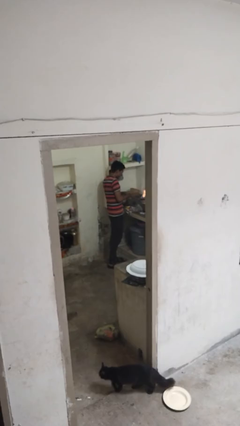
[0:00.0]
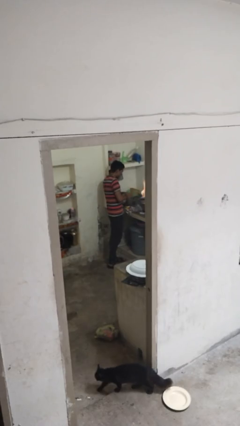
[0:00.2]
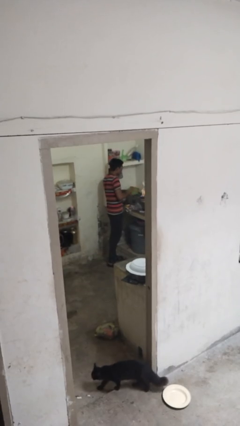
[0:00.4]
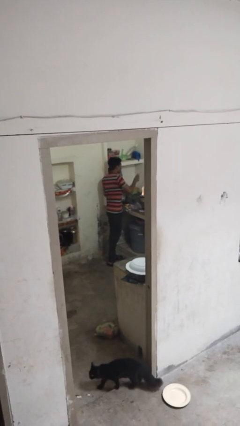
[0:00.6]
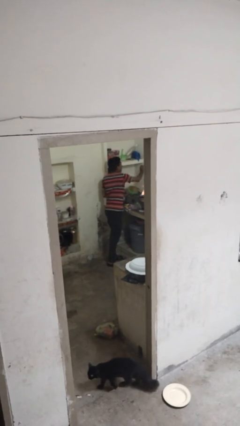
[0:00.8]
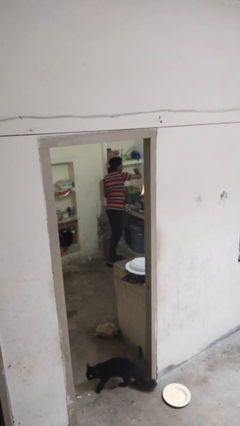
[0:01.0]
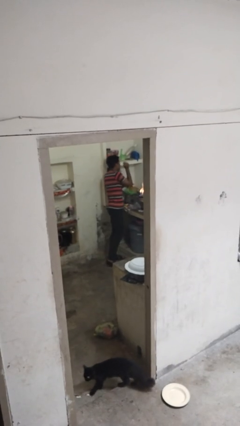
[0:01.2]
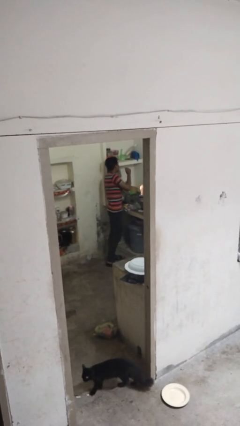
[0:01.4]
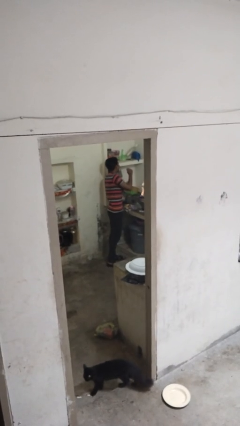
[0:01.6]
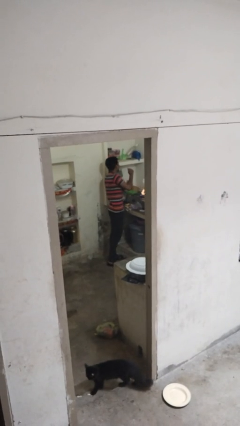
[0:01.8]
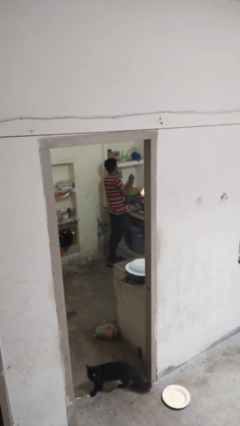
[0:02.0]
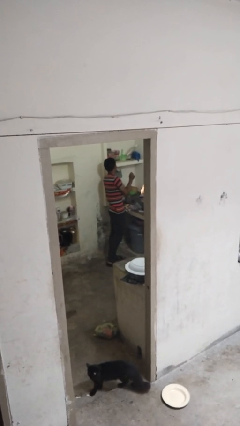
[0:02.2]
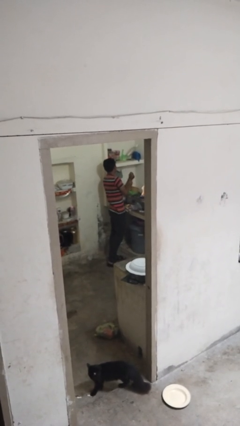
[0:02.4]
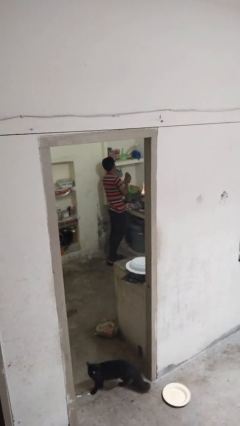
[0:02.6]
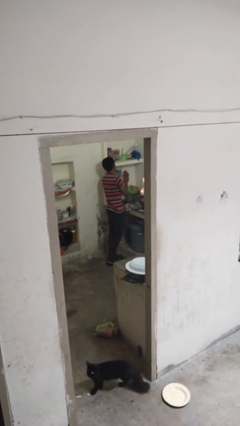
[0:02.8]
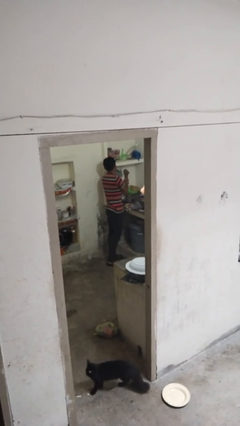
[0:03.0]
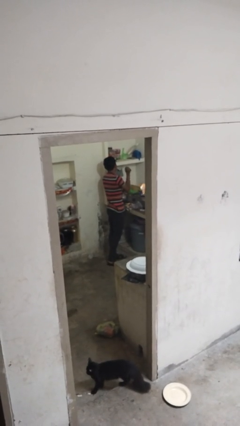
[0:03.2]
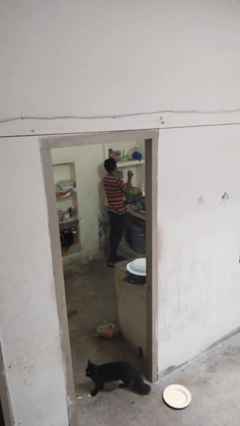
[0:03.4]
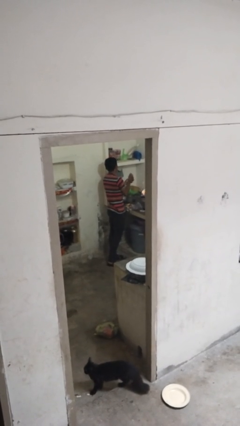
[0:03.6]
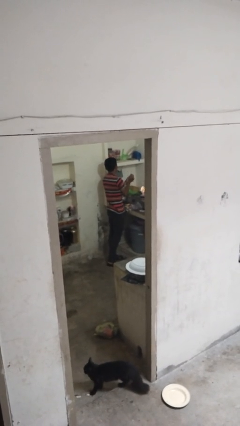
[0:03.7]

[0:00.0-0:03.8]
person burns hand

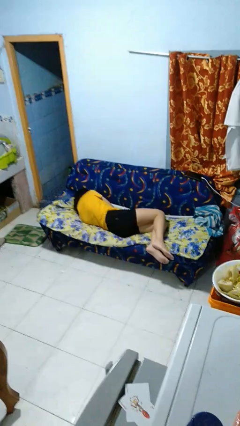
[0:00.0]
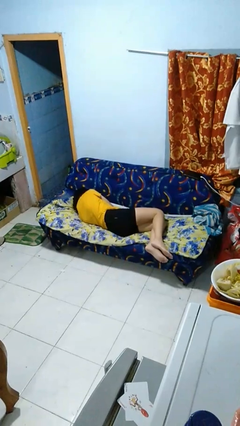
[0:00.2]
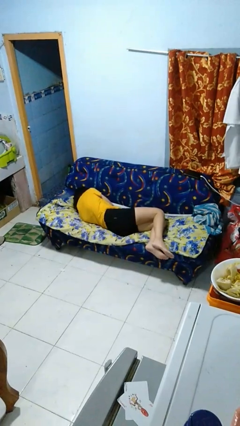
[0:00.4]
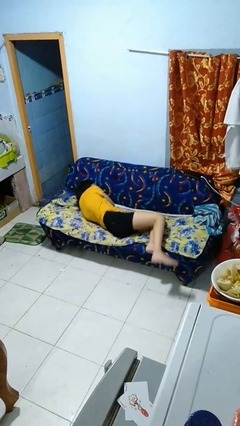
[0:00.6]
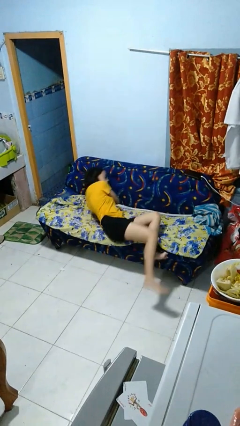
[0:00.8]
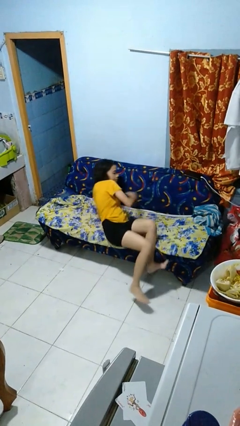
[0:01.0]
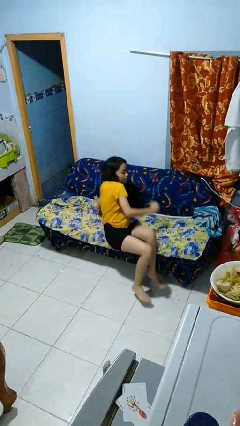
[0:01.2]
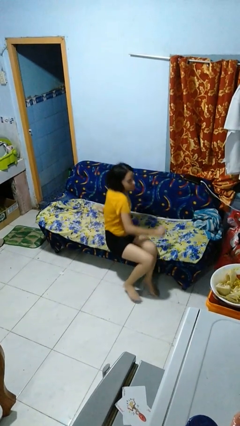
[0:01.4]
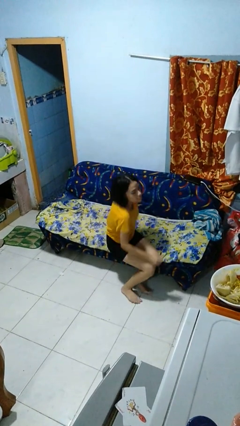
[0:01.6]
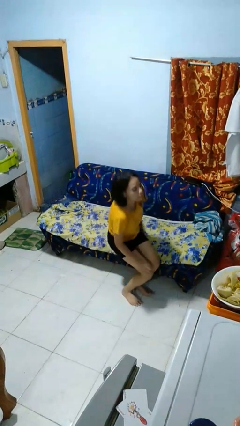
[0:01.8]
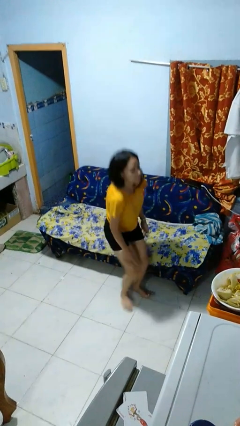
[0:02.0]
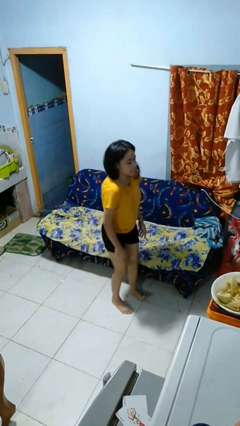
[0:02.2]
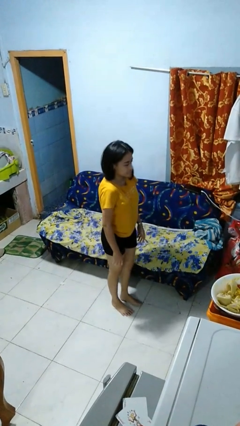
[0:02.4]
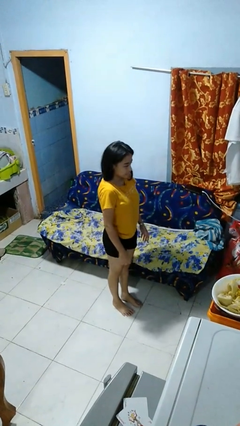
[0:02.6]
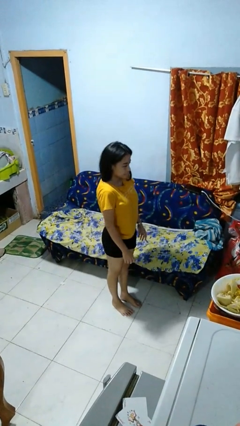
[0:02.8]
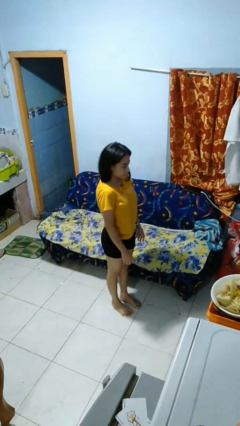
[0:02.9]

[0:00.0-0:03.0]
person stands up

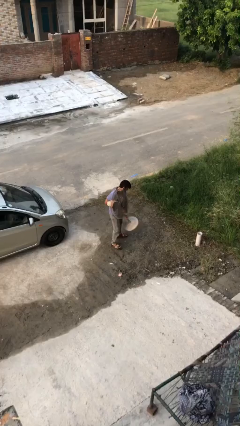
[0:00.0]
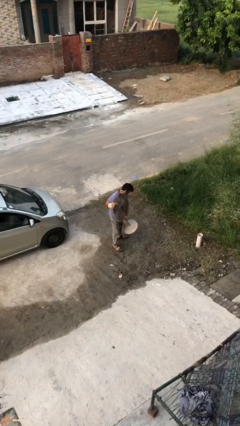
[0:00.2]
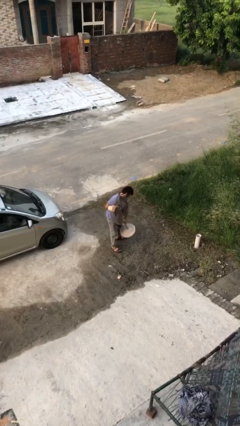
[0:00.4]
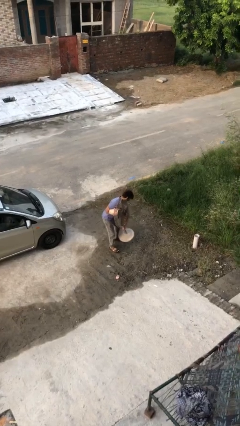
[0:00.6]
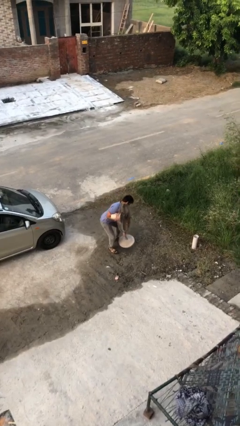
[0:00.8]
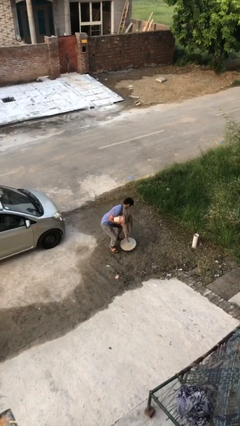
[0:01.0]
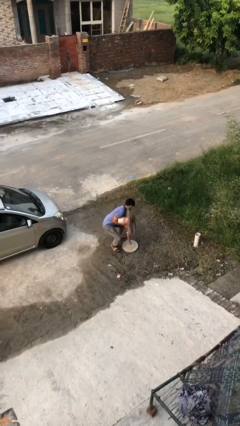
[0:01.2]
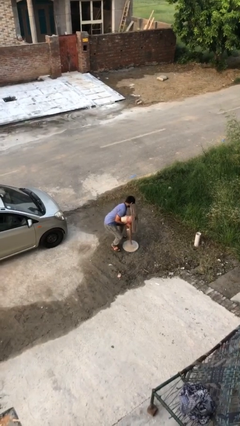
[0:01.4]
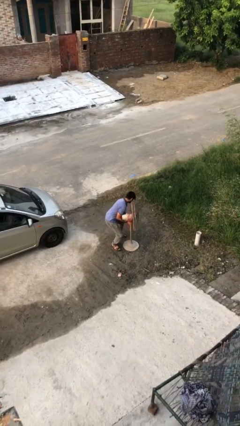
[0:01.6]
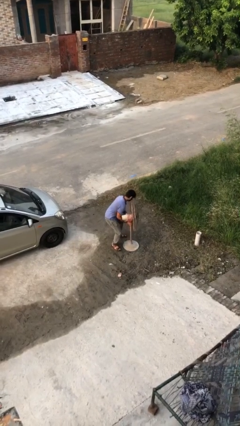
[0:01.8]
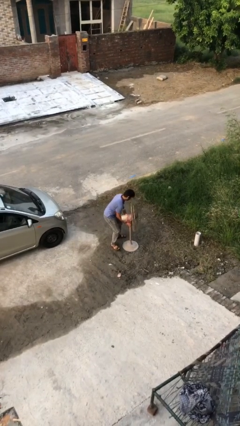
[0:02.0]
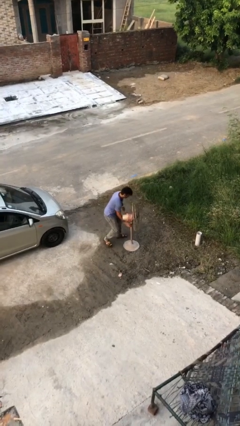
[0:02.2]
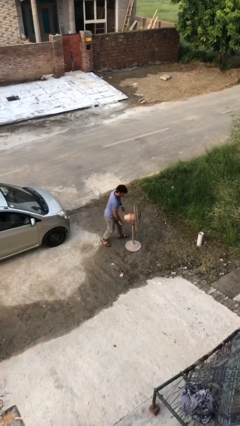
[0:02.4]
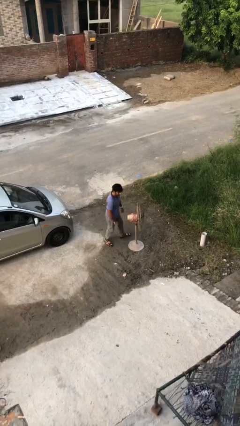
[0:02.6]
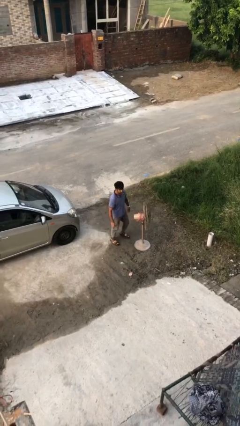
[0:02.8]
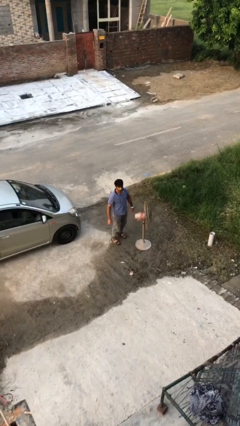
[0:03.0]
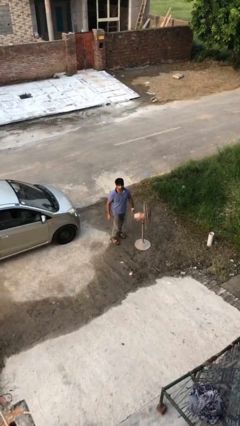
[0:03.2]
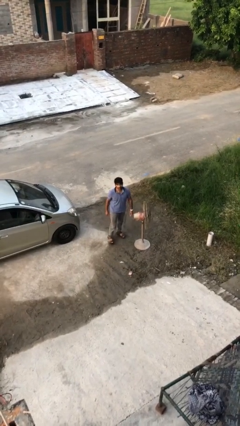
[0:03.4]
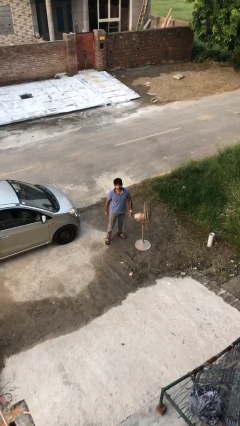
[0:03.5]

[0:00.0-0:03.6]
person puts down object on floor

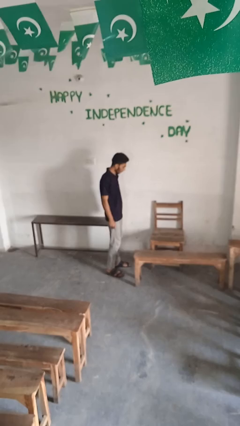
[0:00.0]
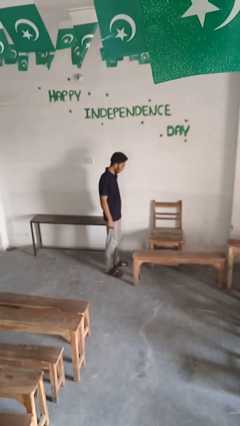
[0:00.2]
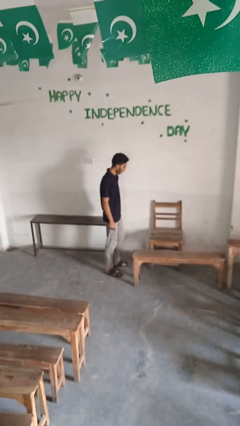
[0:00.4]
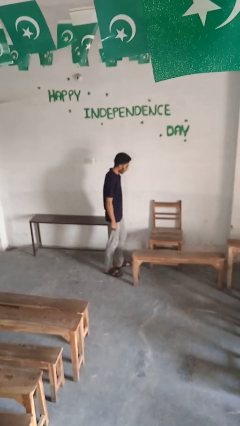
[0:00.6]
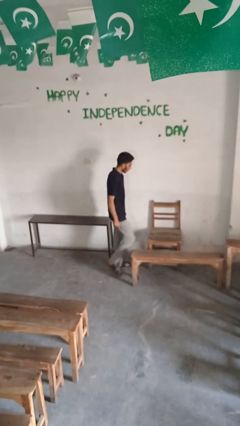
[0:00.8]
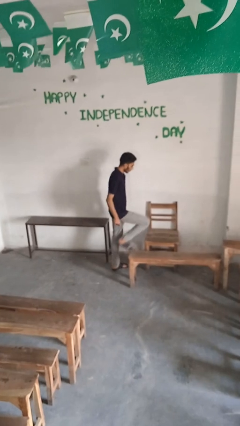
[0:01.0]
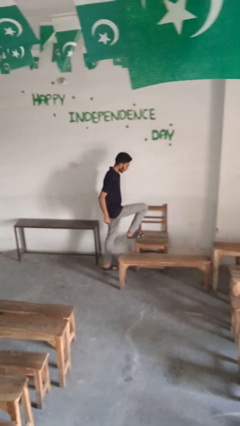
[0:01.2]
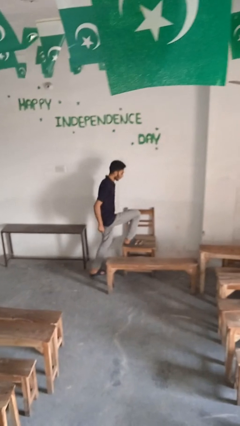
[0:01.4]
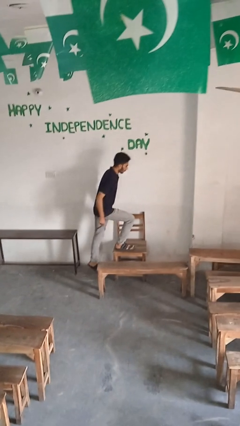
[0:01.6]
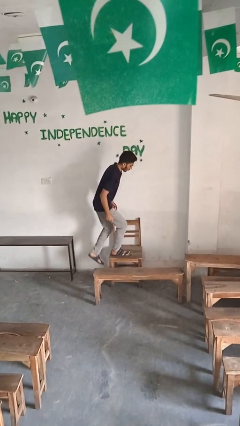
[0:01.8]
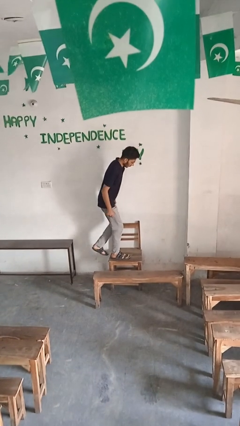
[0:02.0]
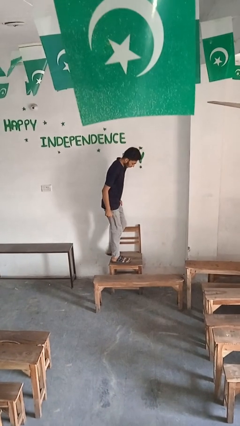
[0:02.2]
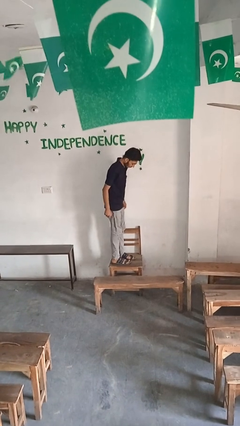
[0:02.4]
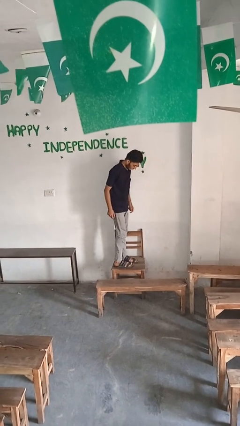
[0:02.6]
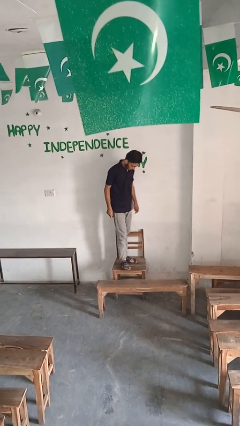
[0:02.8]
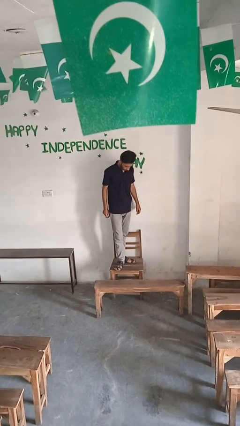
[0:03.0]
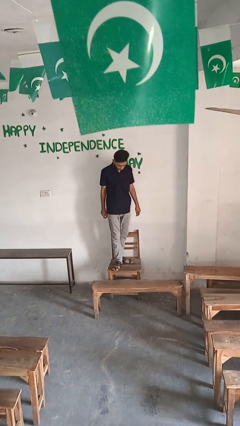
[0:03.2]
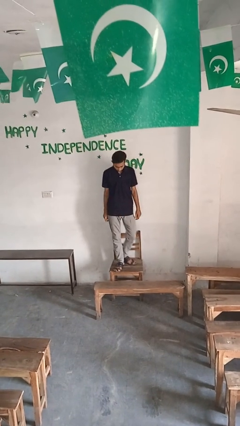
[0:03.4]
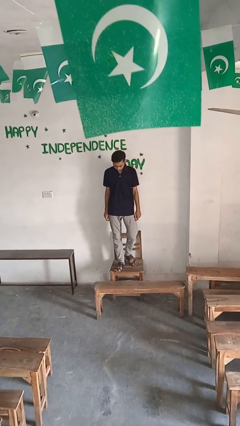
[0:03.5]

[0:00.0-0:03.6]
person climbs on chair

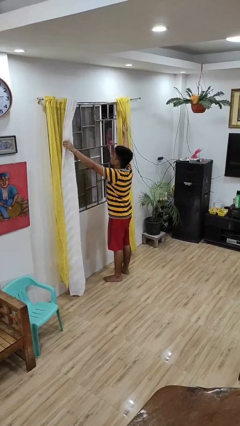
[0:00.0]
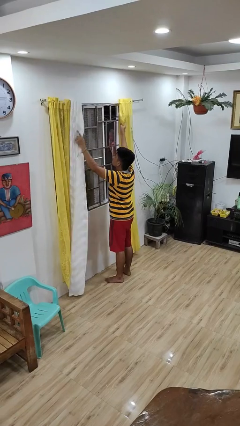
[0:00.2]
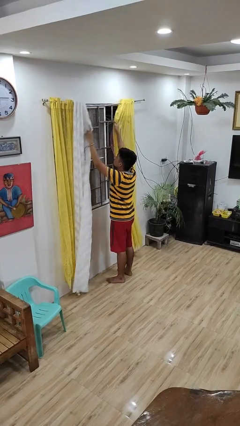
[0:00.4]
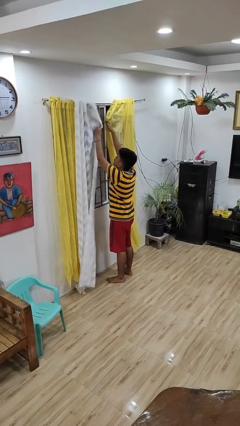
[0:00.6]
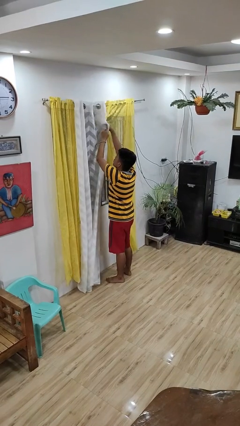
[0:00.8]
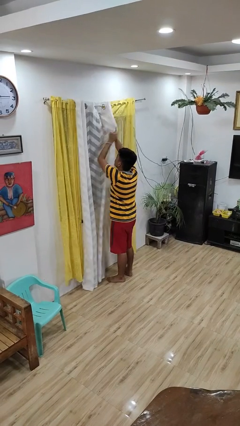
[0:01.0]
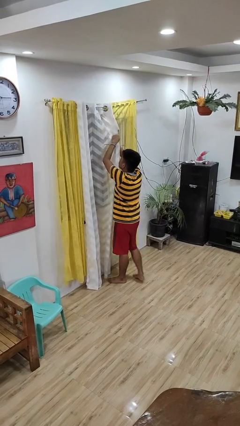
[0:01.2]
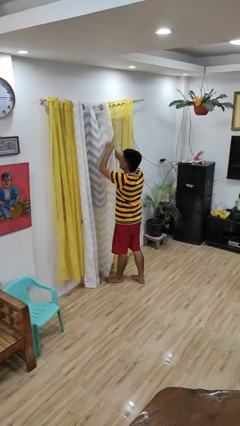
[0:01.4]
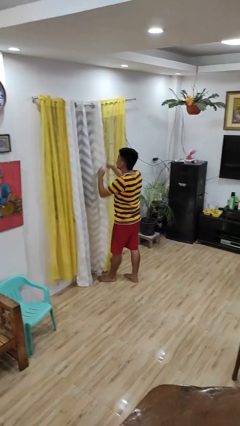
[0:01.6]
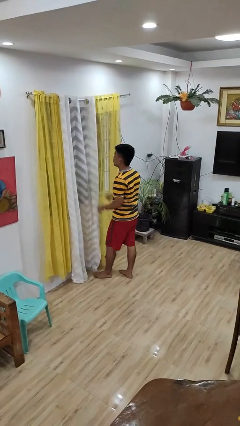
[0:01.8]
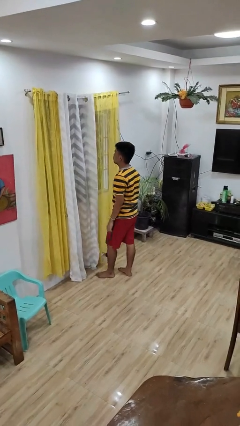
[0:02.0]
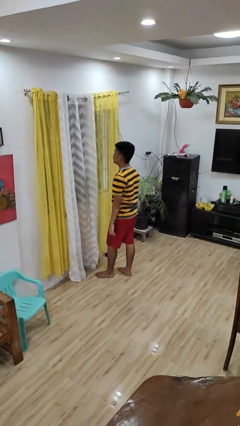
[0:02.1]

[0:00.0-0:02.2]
person closes curtains

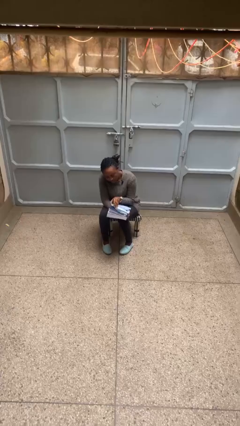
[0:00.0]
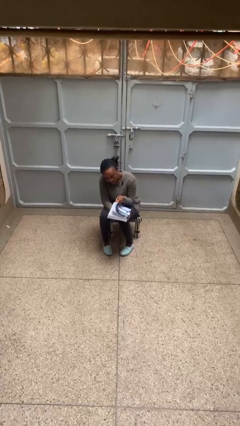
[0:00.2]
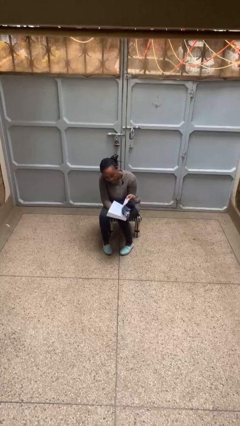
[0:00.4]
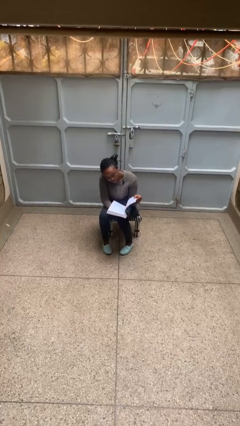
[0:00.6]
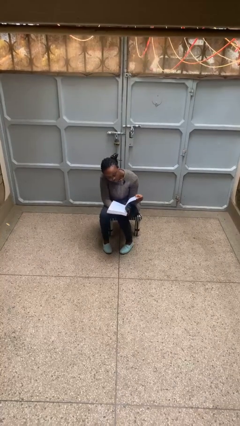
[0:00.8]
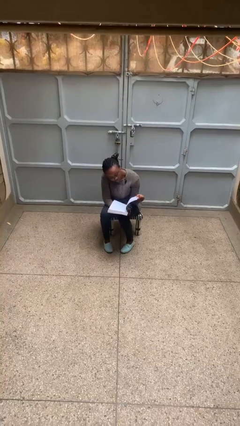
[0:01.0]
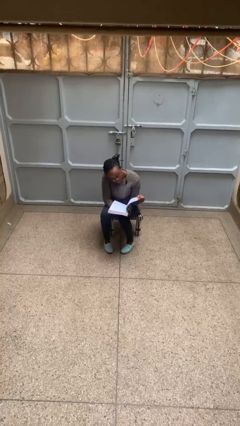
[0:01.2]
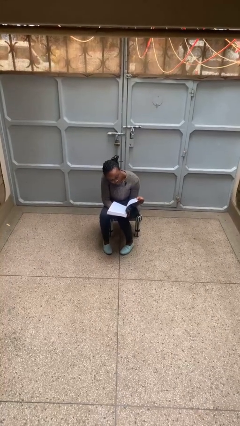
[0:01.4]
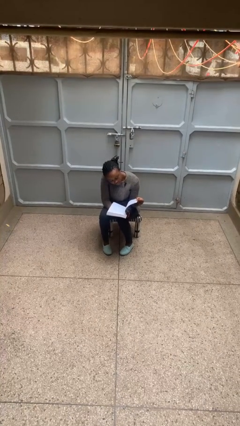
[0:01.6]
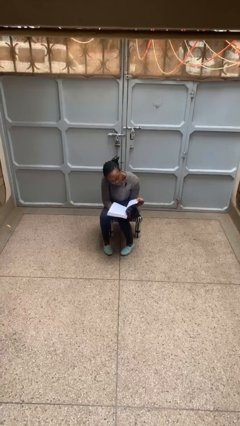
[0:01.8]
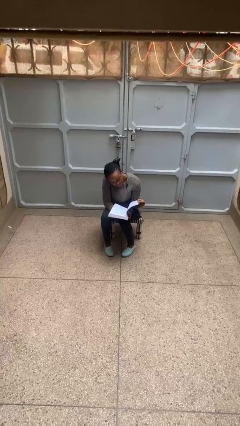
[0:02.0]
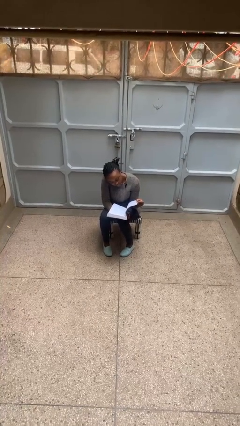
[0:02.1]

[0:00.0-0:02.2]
person reads book
